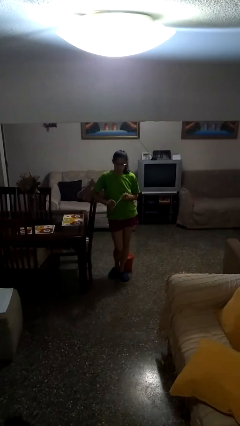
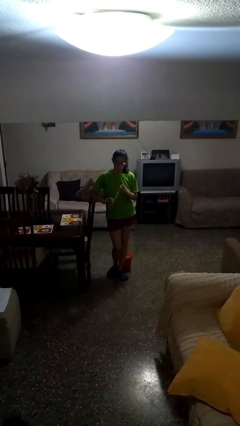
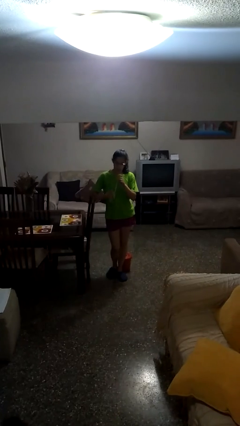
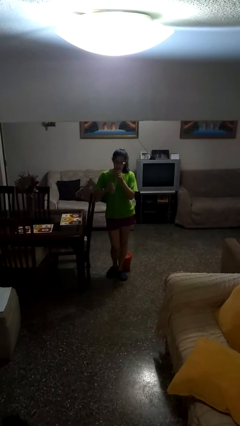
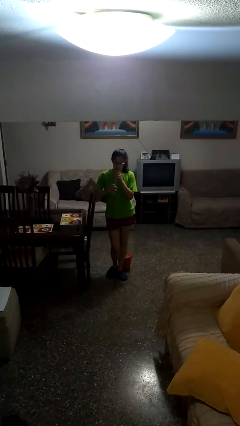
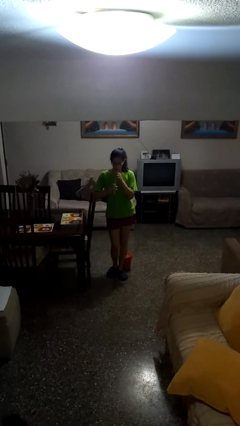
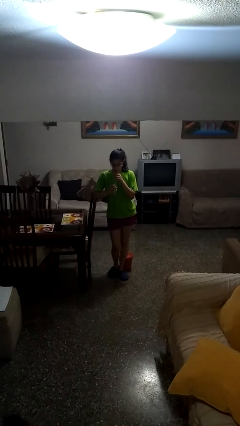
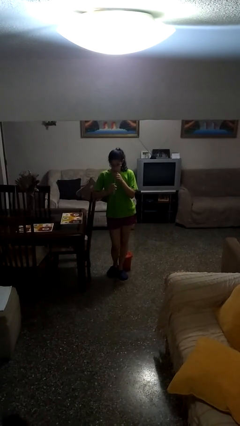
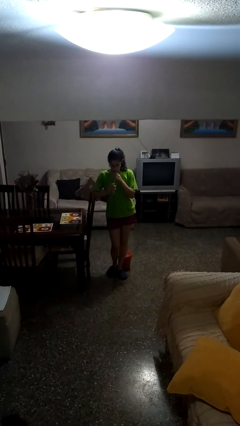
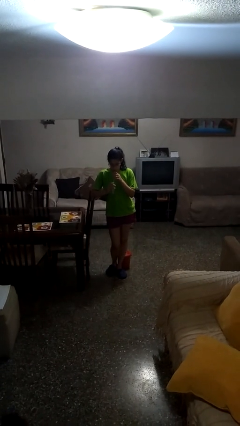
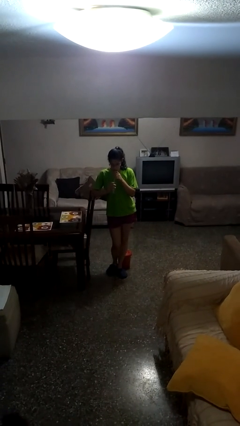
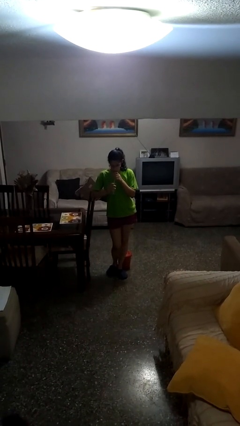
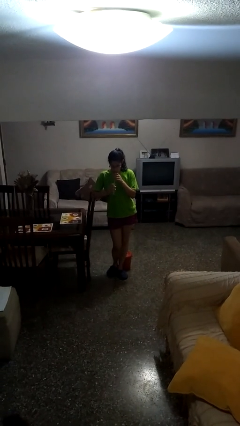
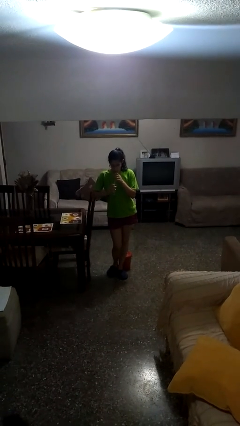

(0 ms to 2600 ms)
person drinks from straw

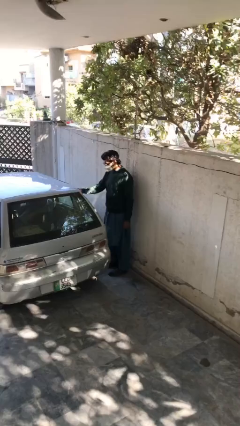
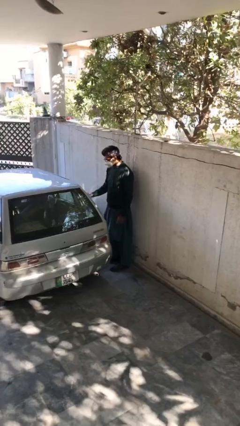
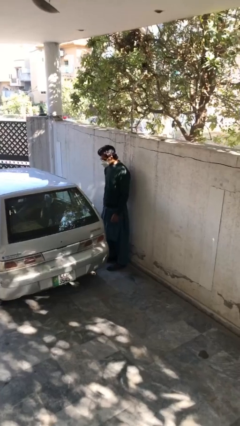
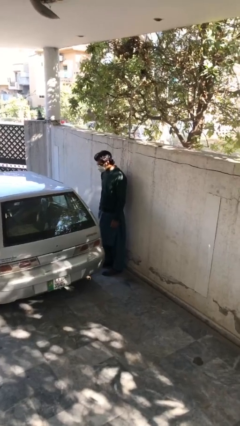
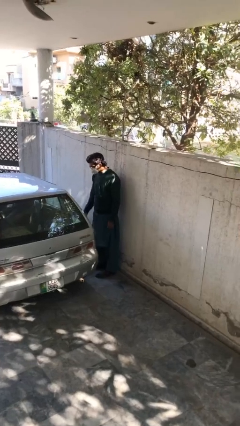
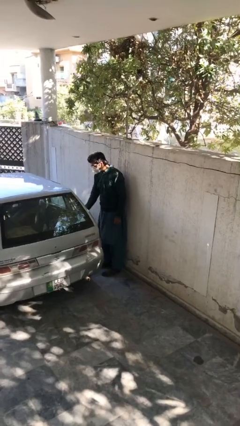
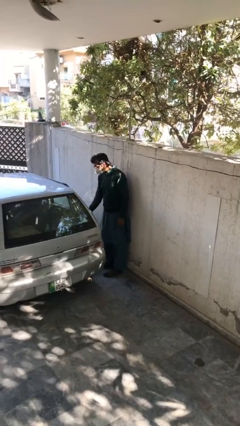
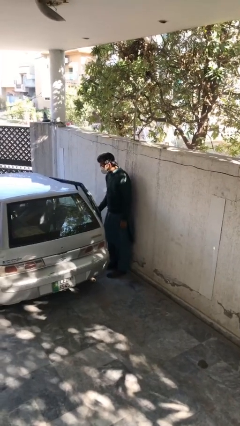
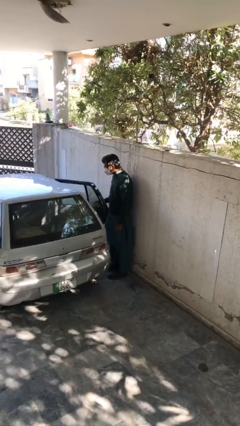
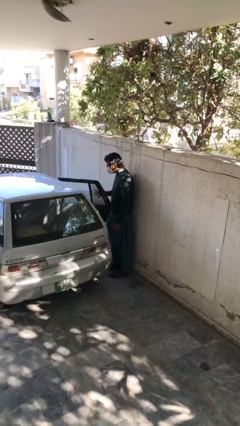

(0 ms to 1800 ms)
person opens car door

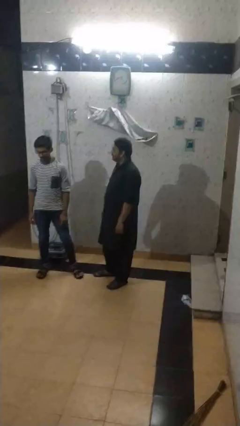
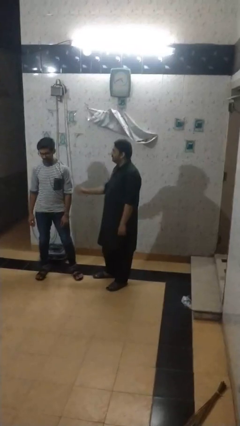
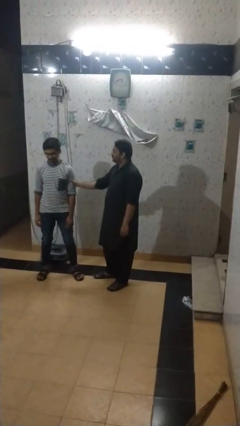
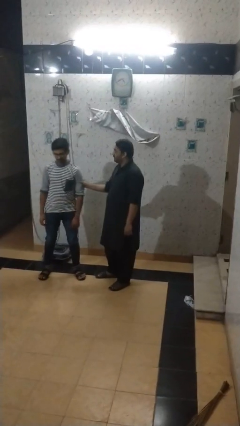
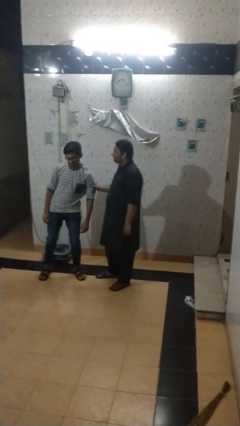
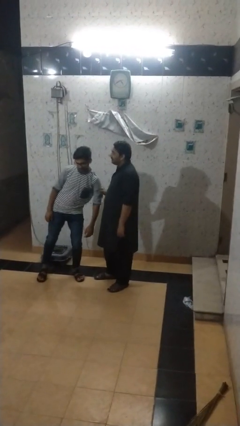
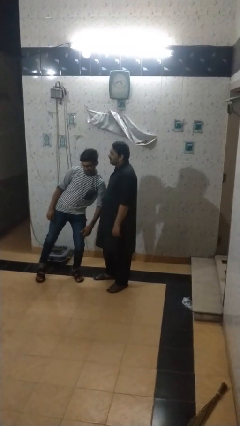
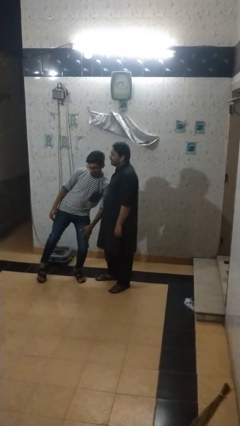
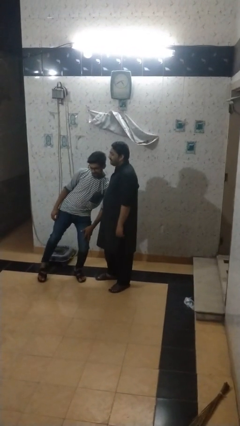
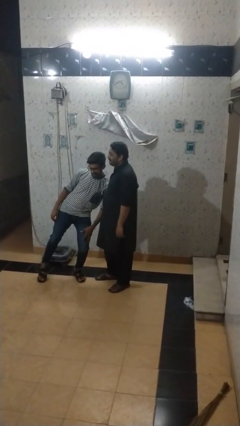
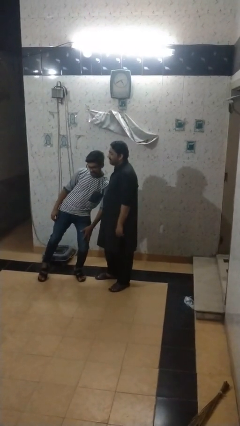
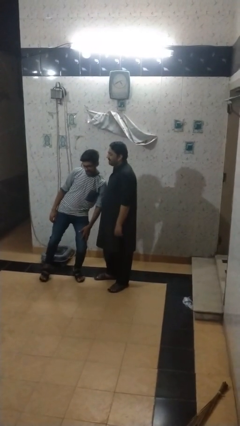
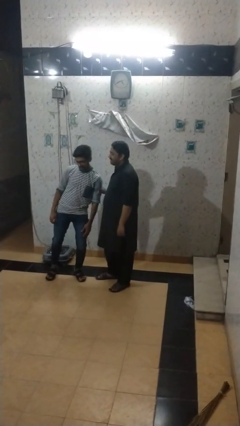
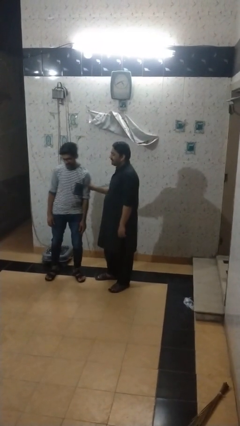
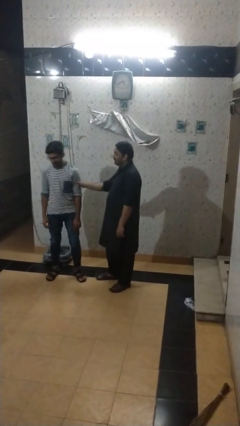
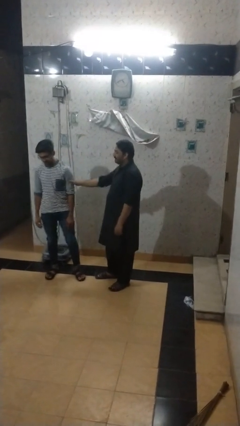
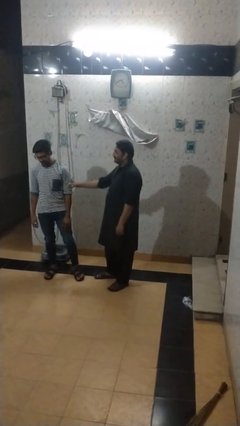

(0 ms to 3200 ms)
person grabs person by bicep

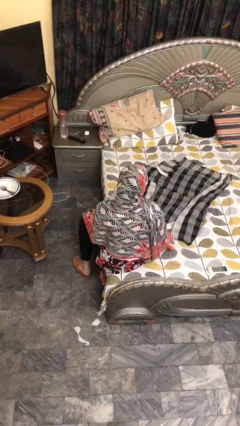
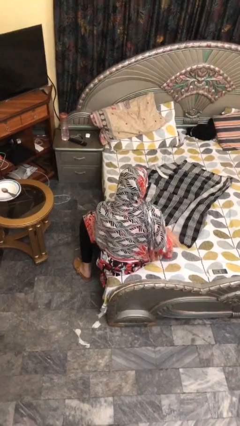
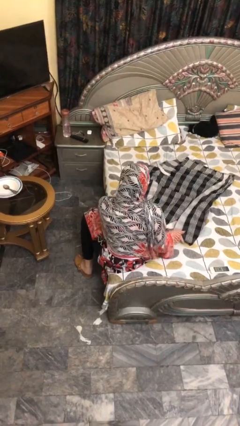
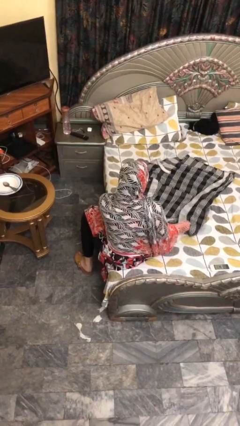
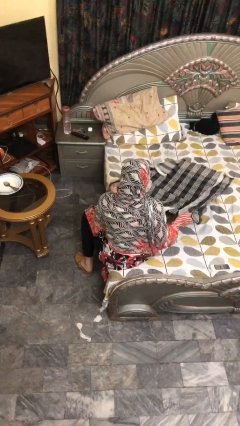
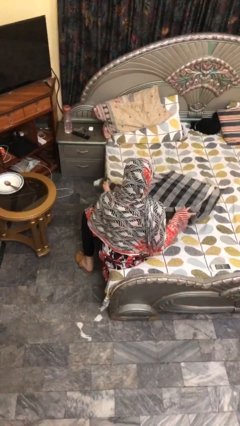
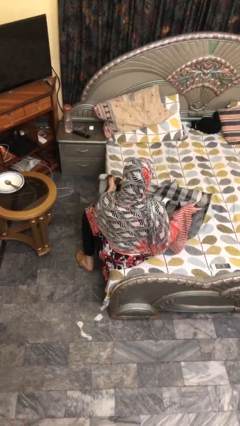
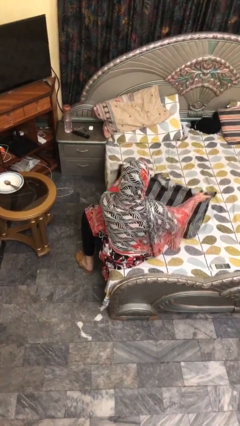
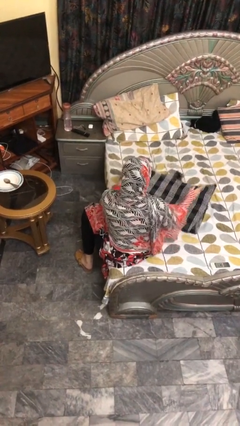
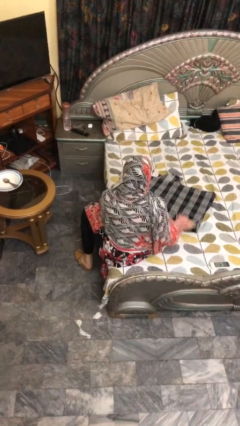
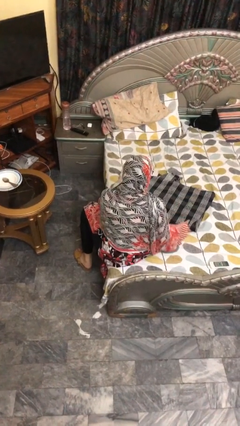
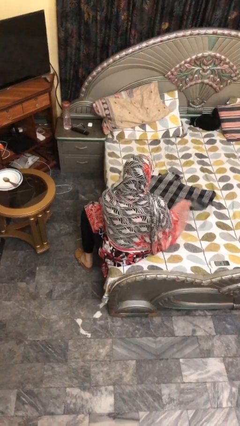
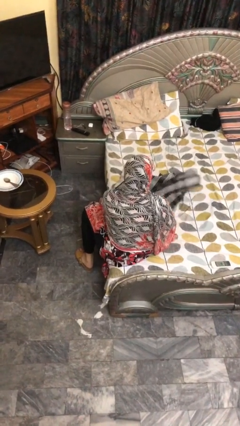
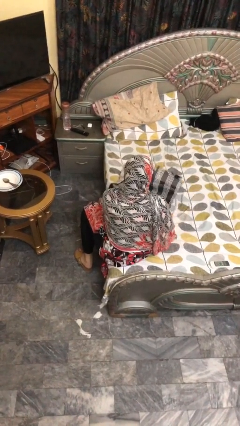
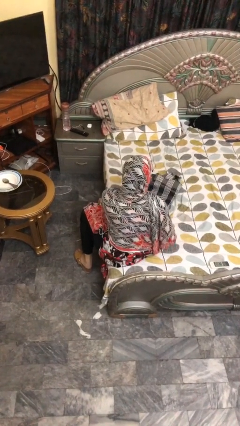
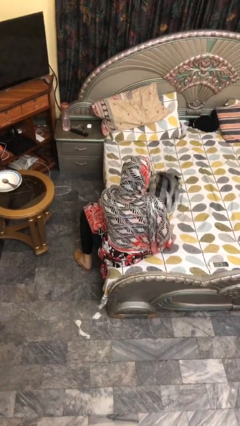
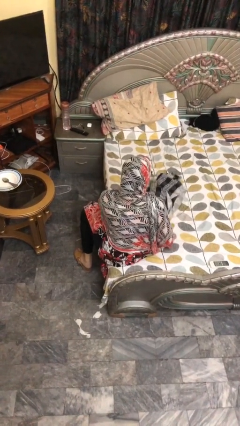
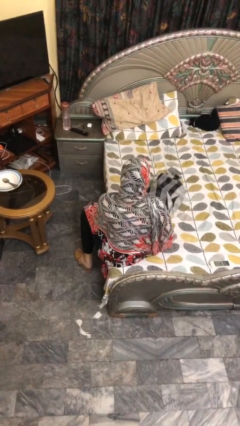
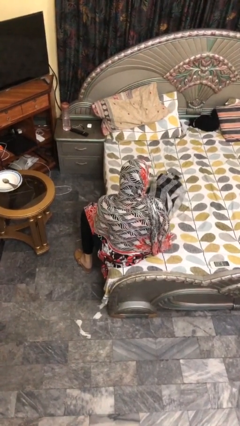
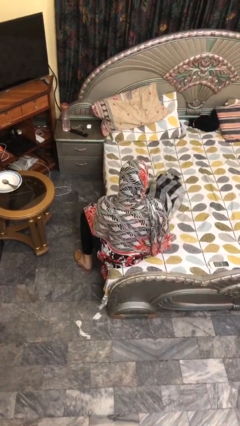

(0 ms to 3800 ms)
person folds blanket

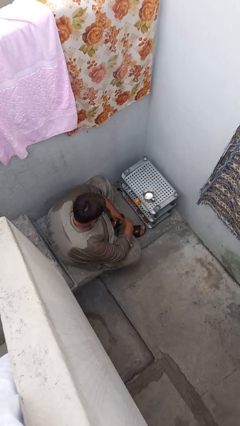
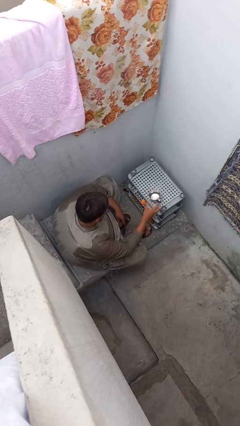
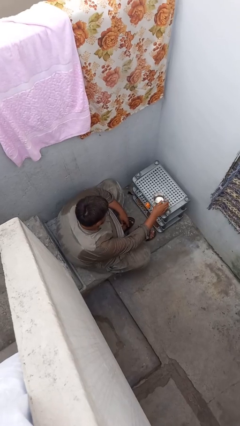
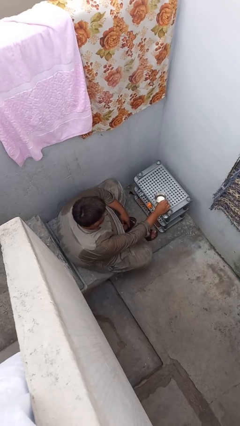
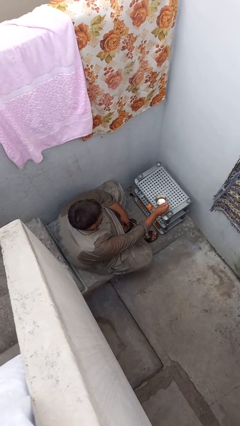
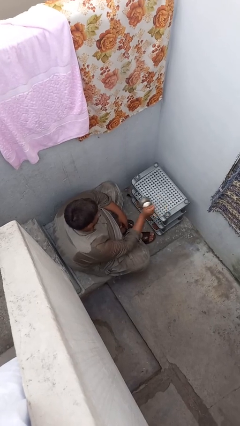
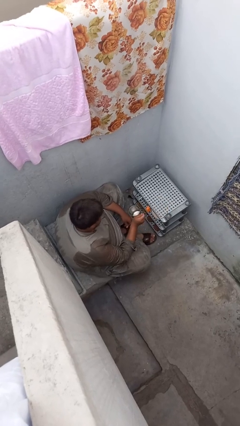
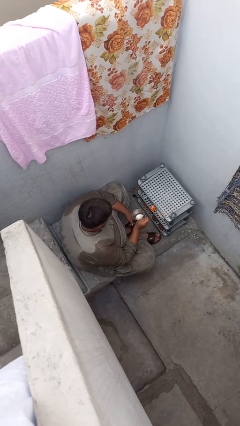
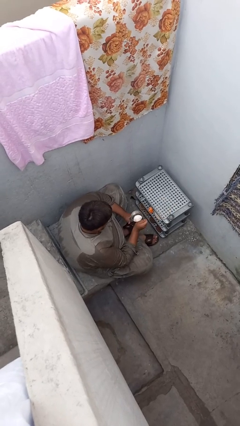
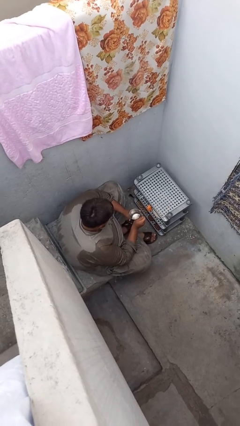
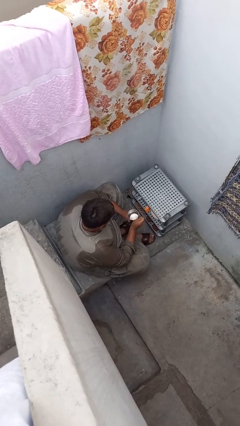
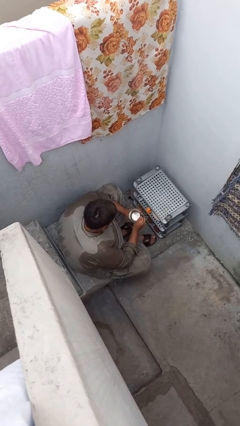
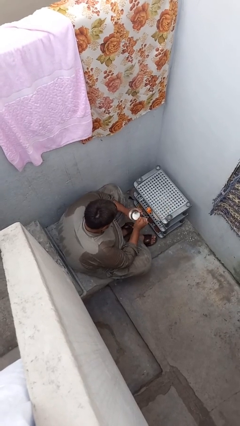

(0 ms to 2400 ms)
person picks up object from table

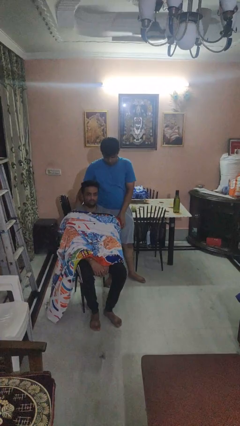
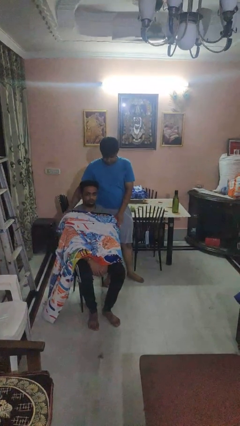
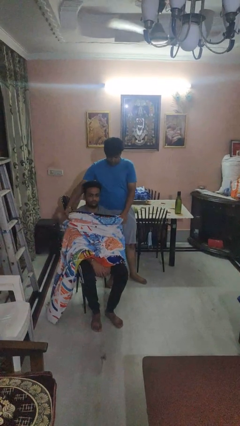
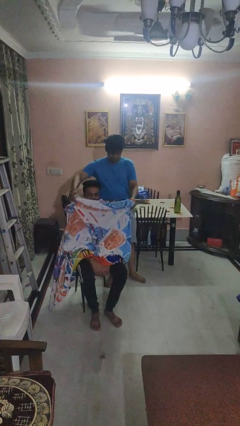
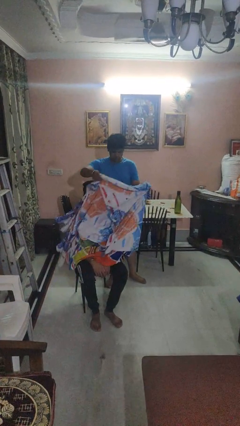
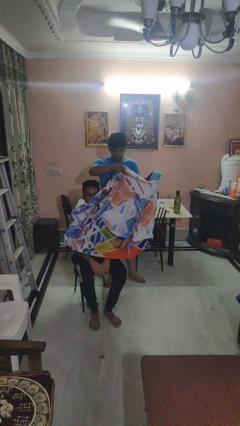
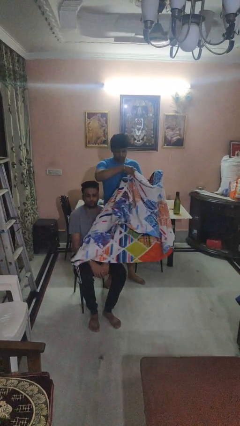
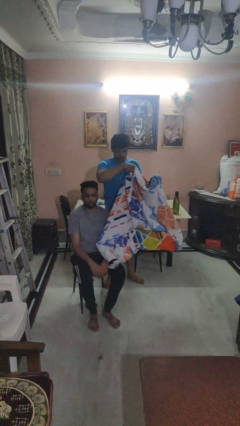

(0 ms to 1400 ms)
person uncovers friend with blanket

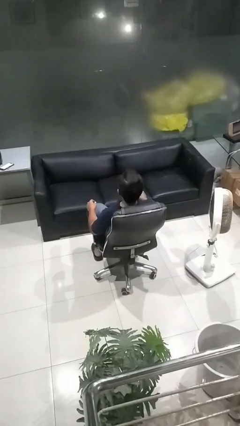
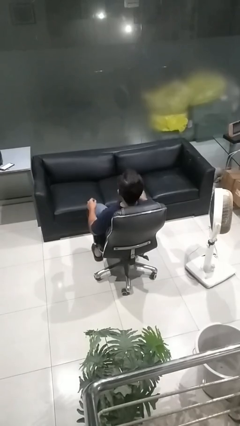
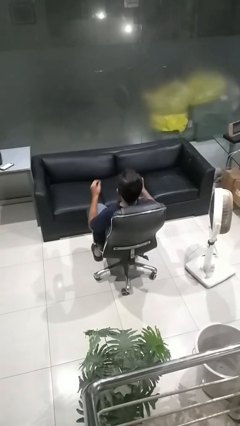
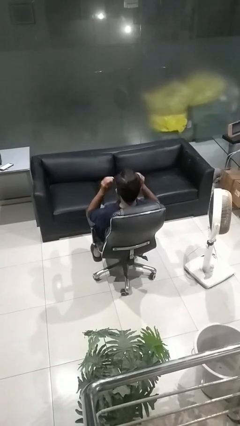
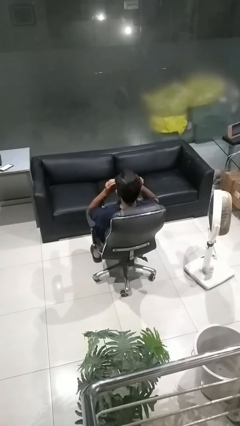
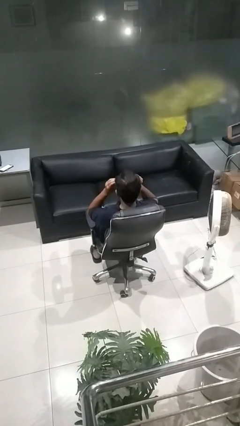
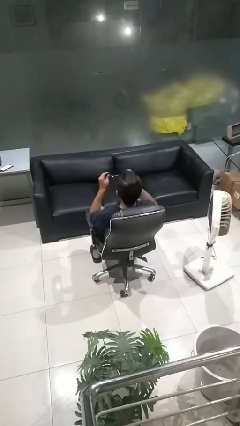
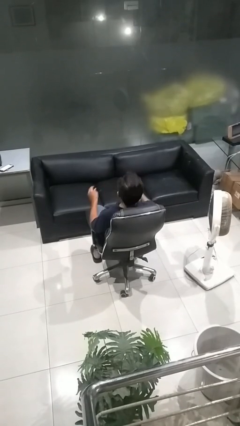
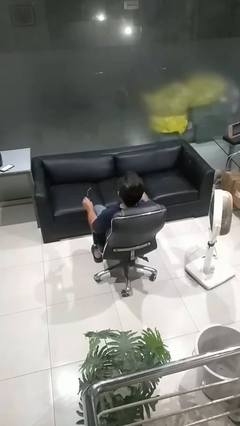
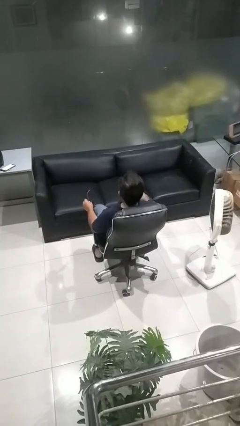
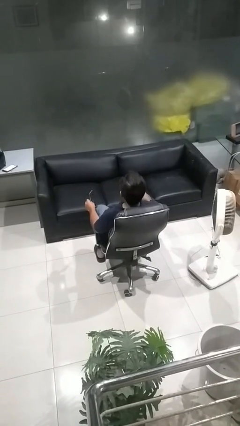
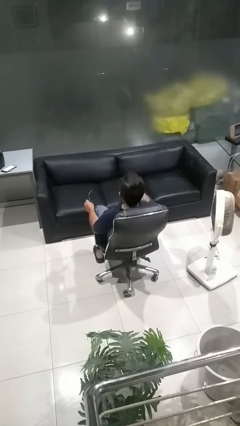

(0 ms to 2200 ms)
person takes off sunglasses
